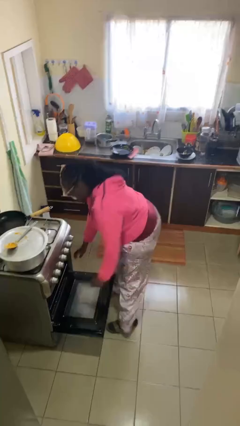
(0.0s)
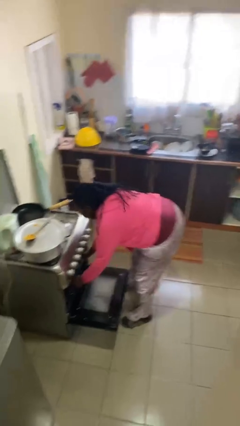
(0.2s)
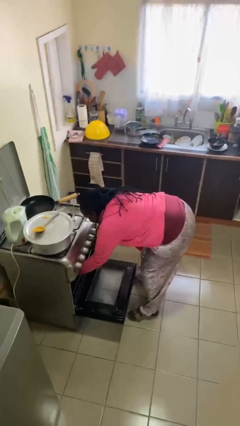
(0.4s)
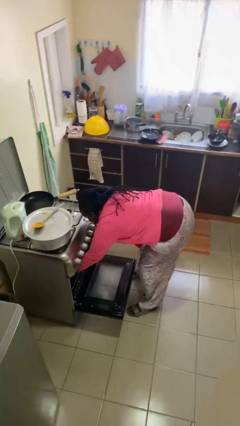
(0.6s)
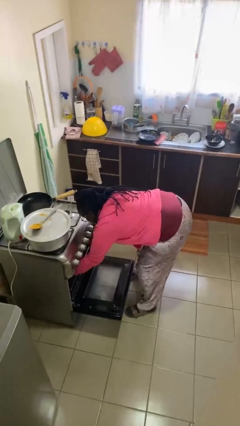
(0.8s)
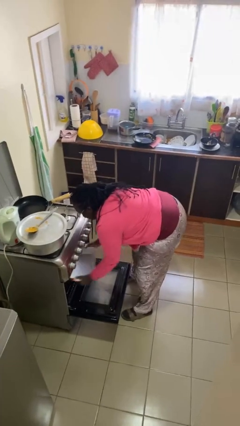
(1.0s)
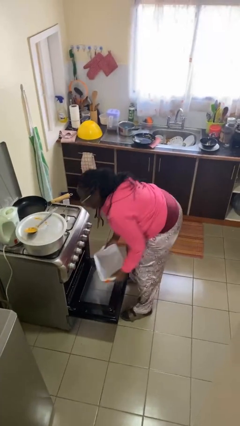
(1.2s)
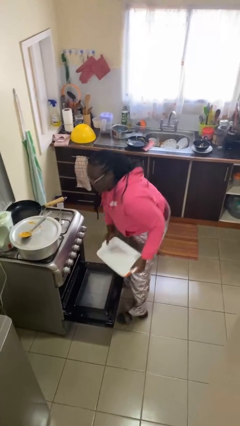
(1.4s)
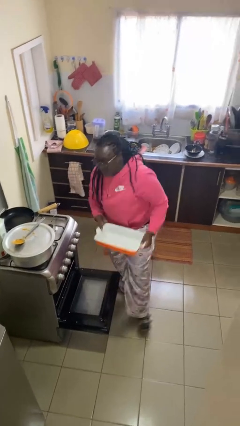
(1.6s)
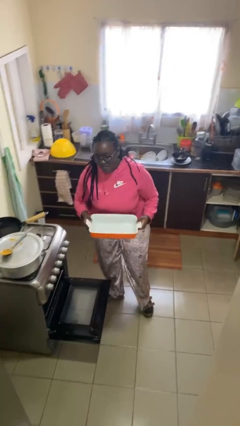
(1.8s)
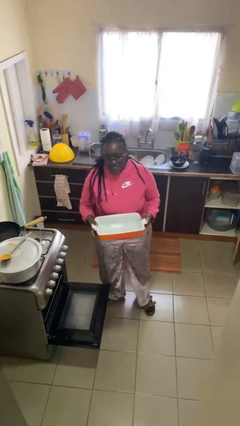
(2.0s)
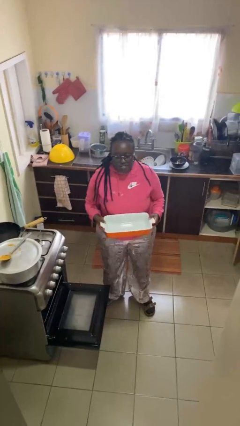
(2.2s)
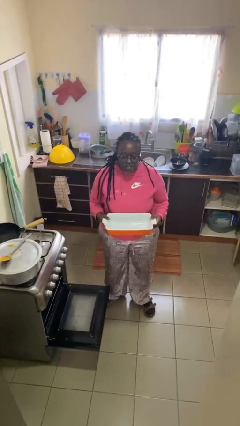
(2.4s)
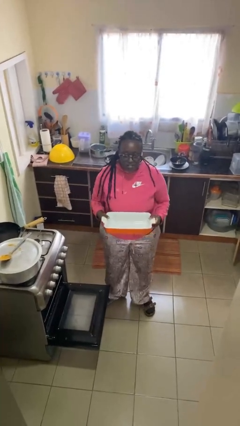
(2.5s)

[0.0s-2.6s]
person takes object from oven

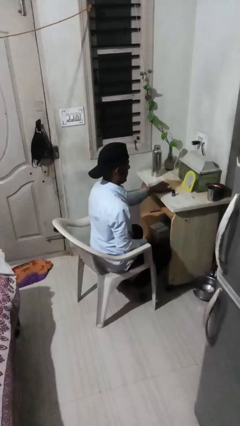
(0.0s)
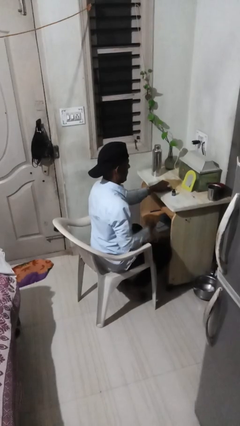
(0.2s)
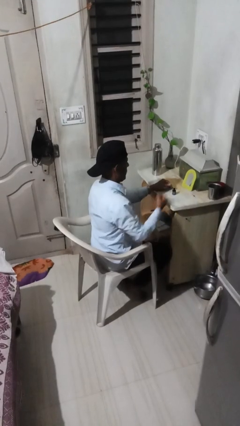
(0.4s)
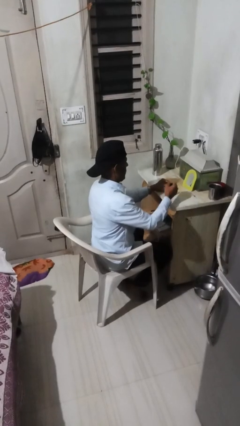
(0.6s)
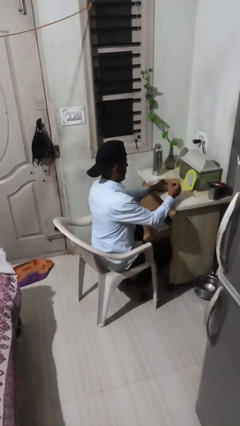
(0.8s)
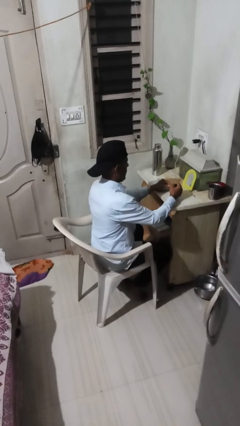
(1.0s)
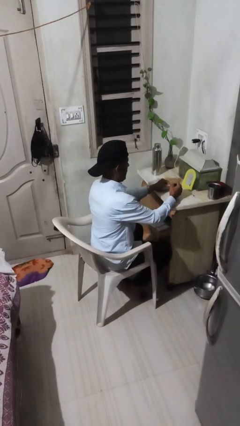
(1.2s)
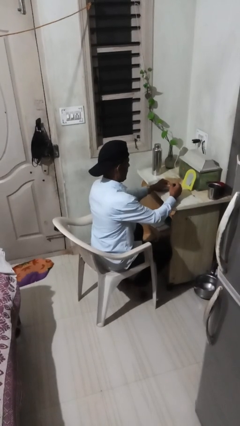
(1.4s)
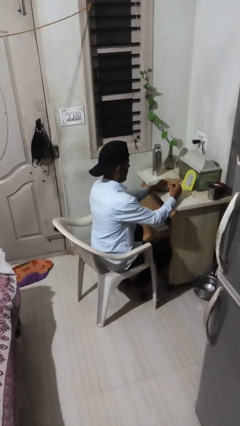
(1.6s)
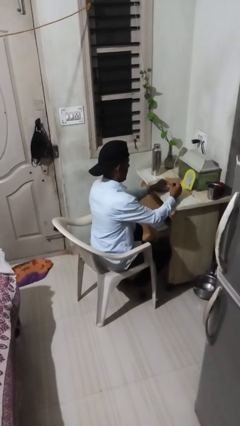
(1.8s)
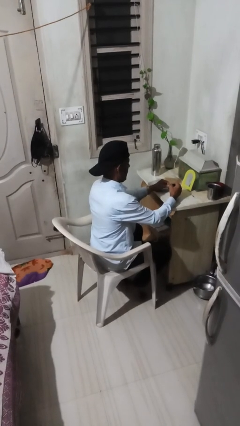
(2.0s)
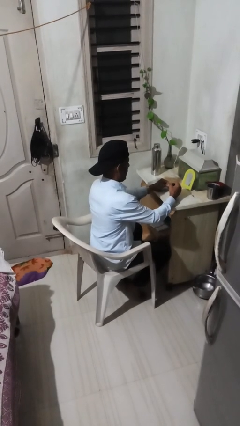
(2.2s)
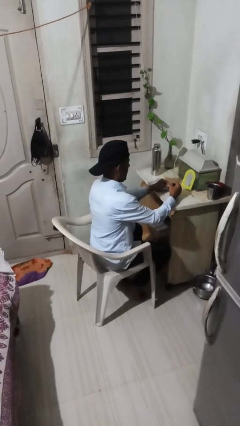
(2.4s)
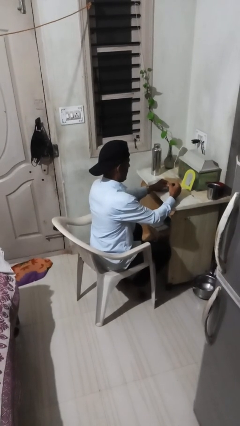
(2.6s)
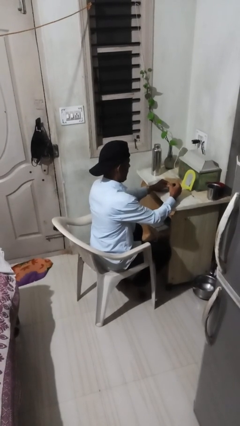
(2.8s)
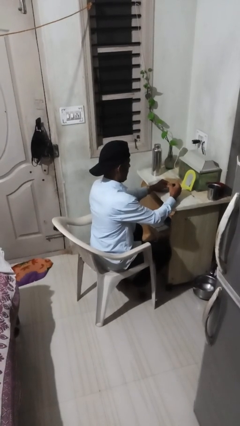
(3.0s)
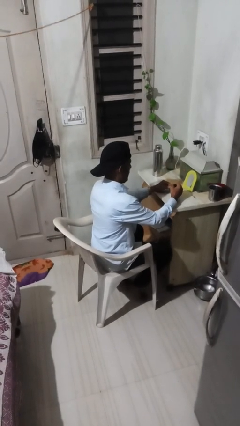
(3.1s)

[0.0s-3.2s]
person paints fingernails

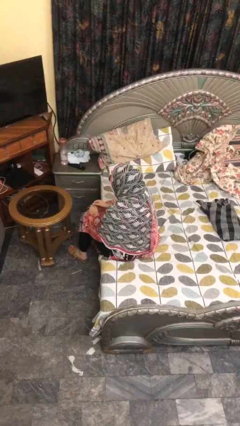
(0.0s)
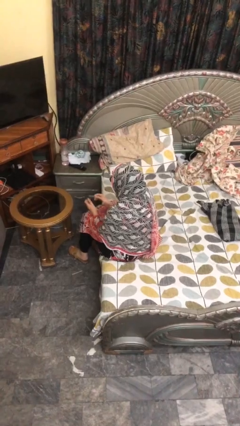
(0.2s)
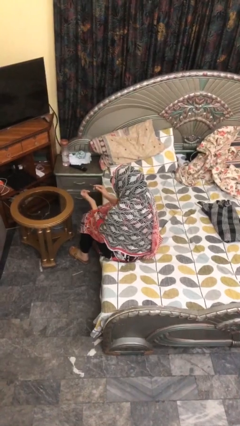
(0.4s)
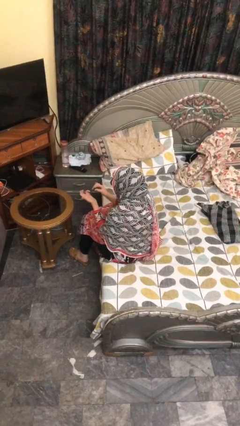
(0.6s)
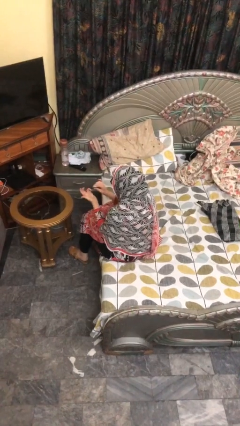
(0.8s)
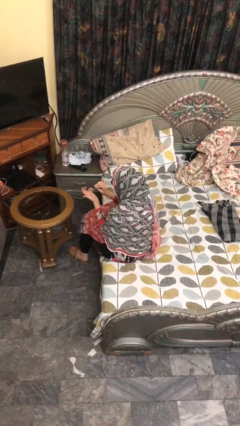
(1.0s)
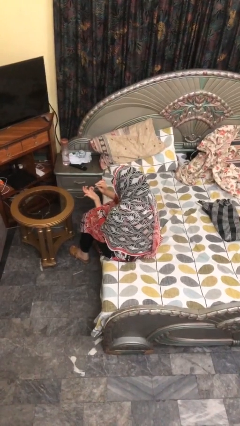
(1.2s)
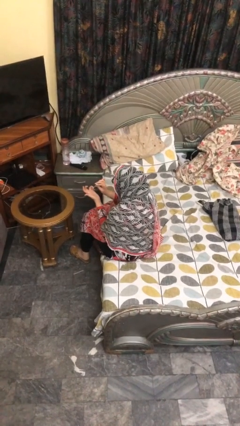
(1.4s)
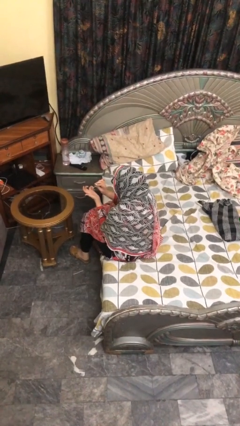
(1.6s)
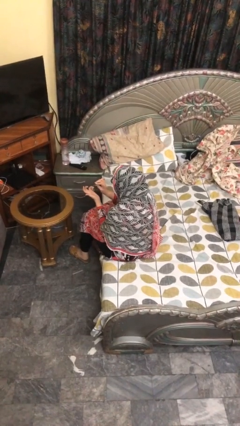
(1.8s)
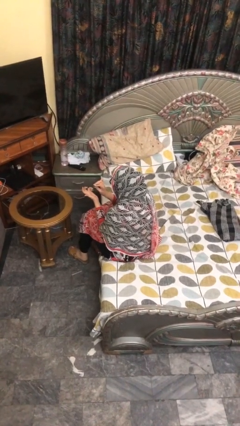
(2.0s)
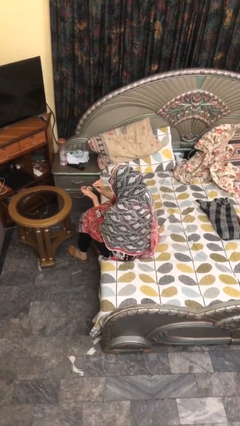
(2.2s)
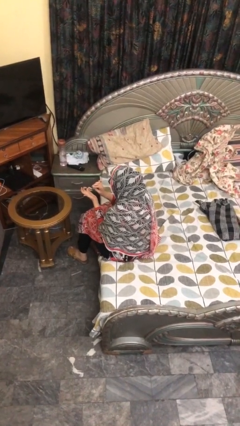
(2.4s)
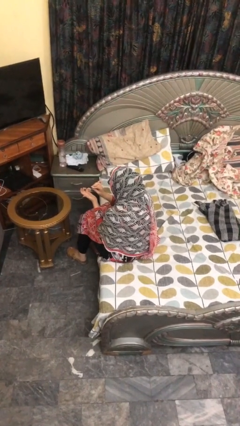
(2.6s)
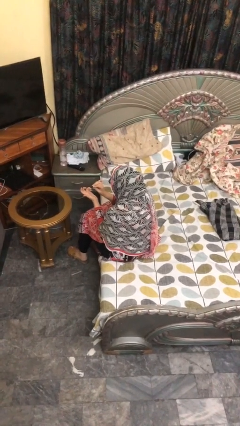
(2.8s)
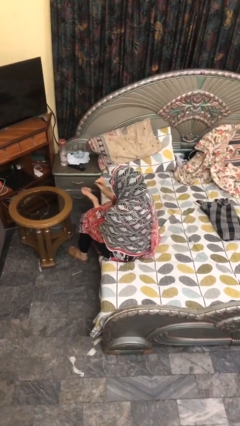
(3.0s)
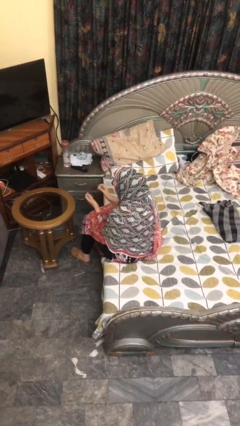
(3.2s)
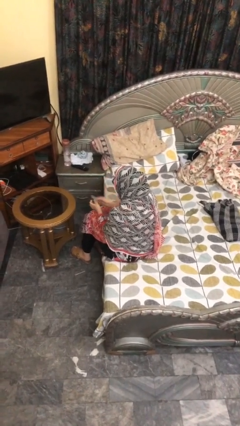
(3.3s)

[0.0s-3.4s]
person files fingernails

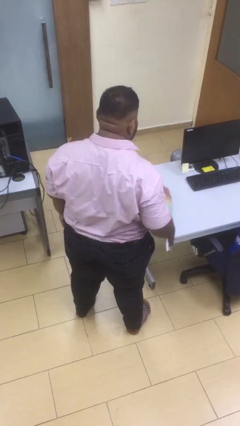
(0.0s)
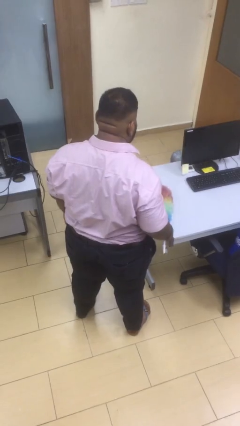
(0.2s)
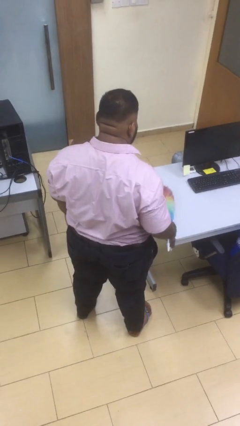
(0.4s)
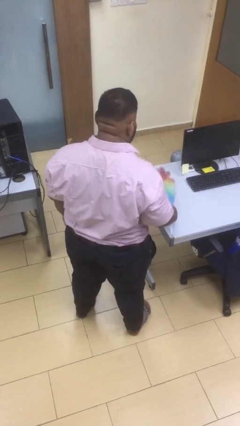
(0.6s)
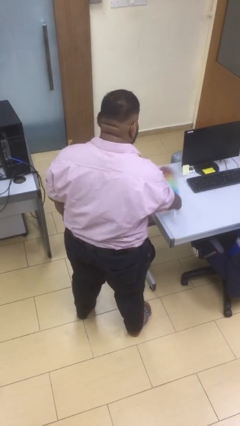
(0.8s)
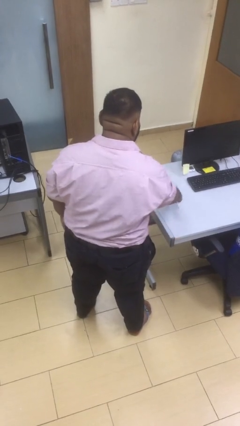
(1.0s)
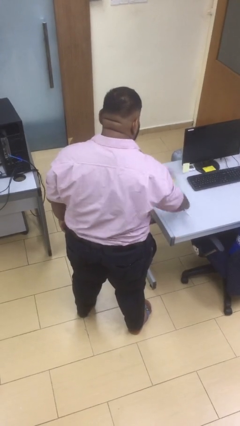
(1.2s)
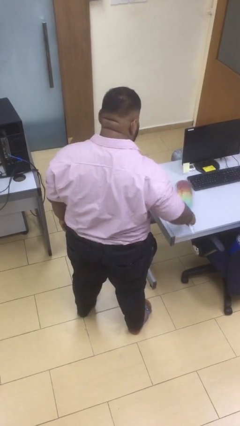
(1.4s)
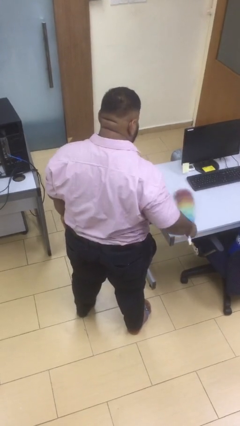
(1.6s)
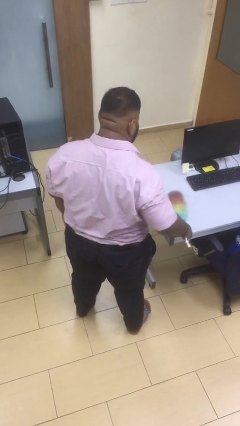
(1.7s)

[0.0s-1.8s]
person dusts furniture

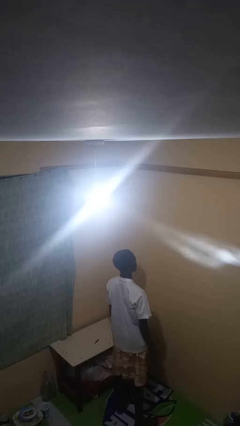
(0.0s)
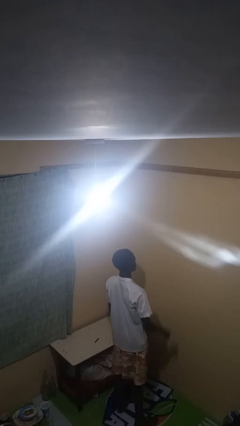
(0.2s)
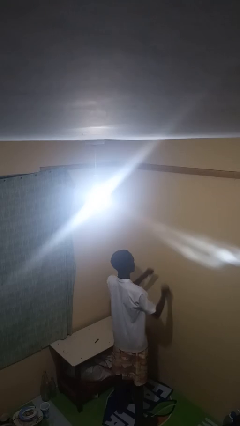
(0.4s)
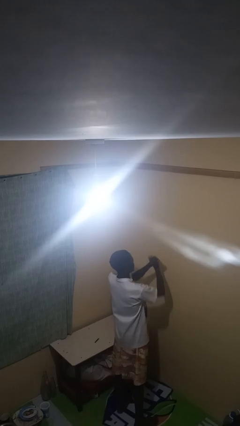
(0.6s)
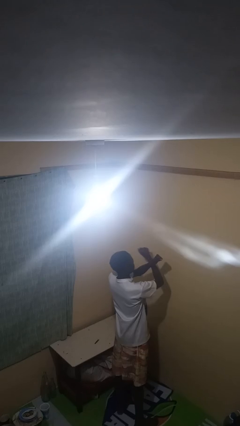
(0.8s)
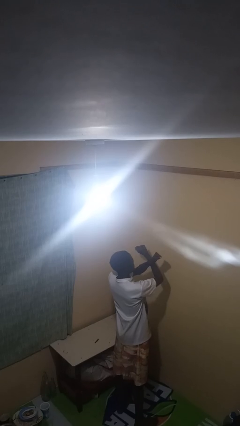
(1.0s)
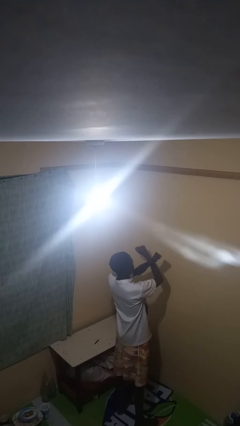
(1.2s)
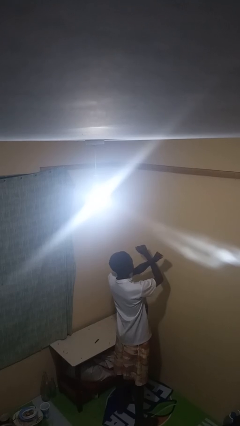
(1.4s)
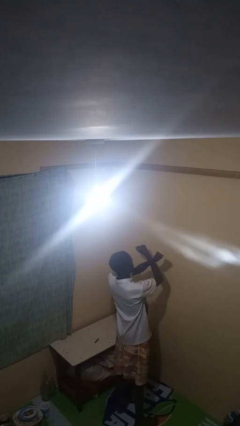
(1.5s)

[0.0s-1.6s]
person gestures arms x

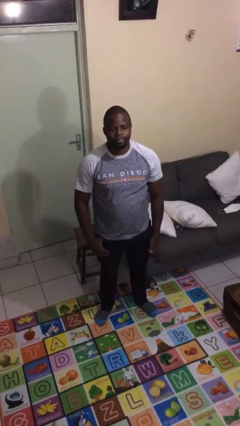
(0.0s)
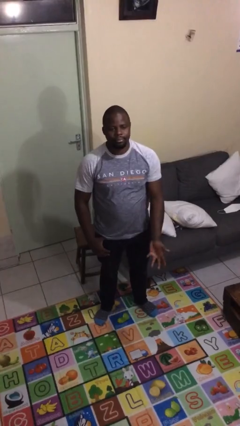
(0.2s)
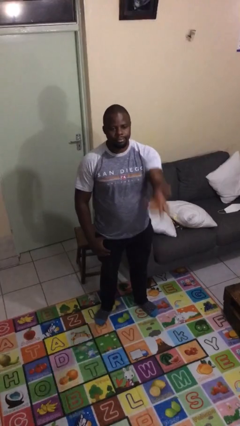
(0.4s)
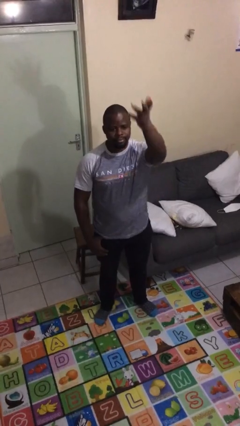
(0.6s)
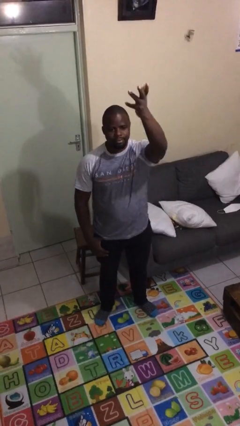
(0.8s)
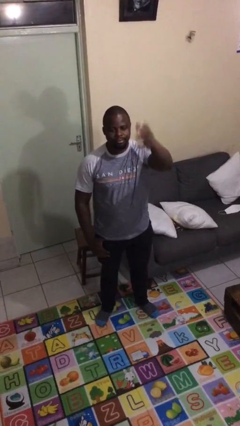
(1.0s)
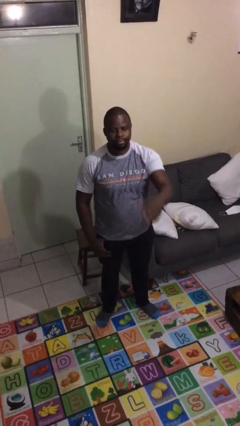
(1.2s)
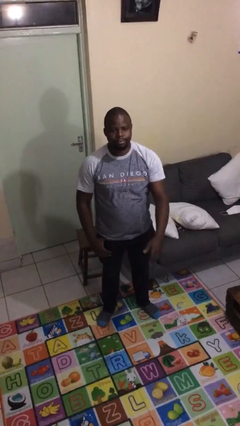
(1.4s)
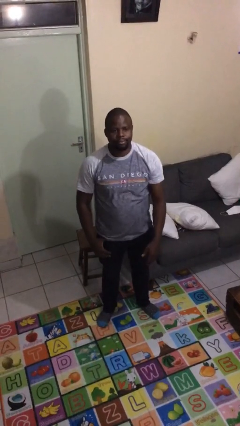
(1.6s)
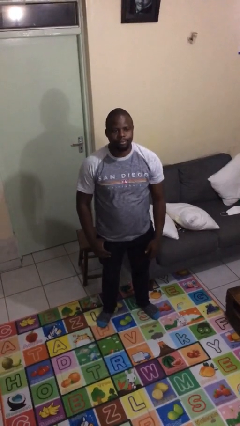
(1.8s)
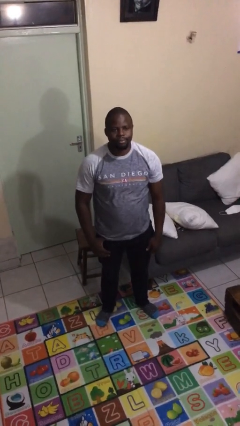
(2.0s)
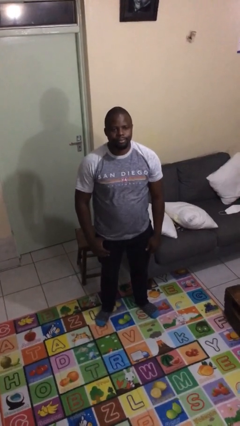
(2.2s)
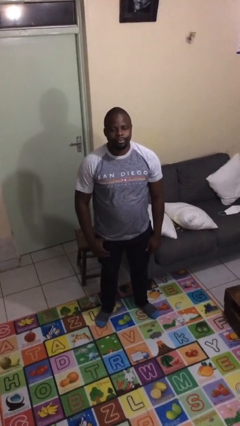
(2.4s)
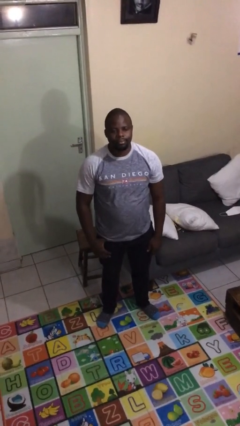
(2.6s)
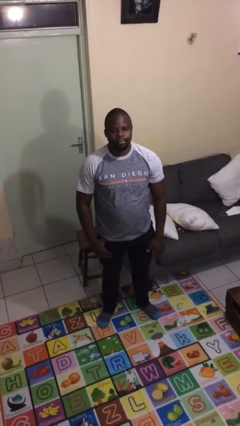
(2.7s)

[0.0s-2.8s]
person gestures swipe up

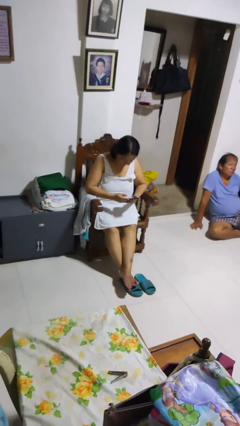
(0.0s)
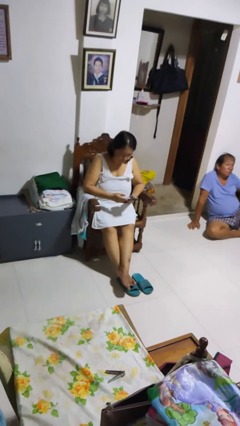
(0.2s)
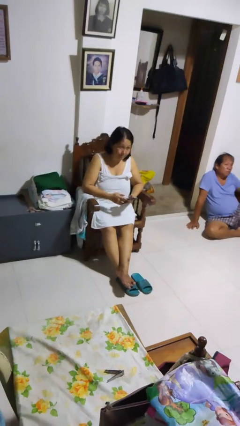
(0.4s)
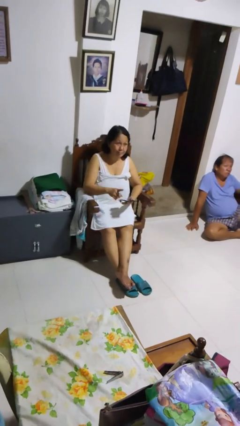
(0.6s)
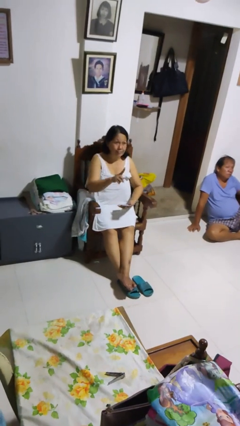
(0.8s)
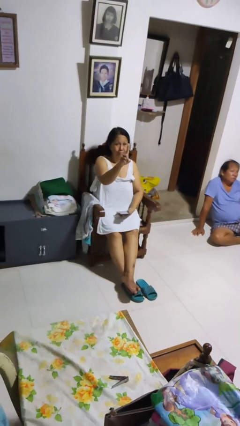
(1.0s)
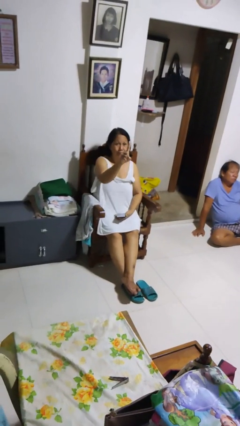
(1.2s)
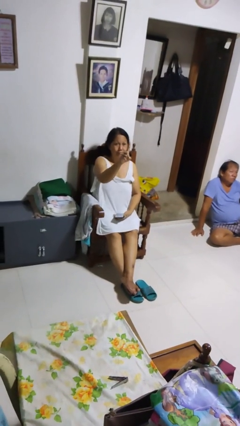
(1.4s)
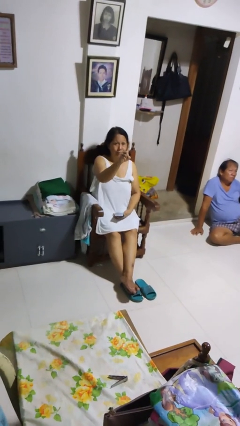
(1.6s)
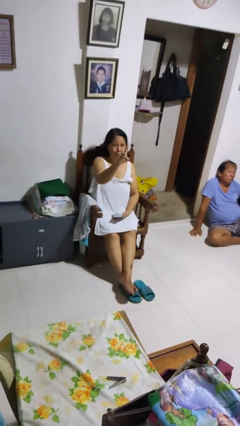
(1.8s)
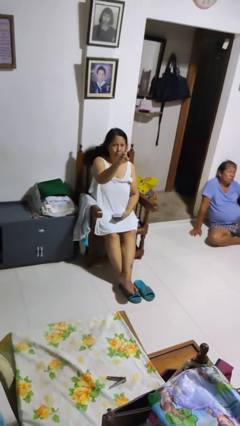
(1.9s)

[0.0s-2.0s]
person gestures number one
